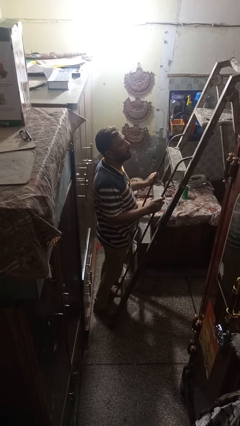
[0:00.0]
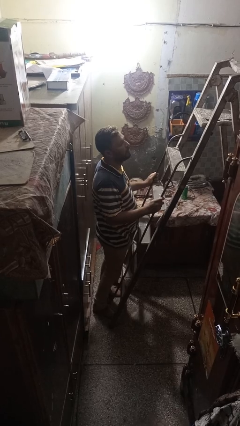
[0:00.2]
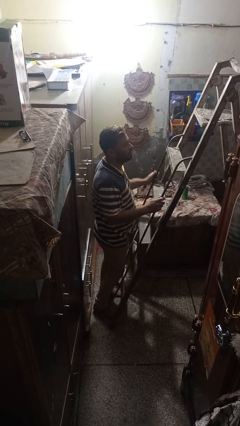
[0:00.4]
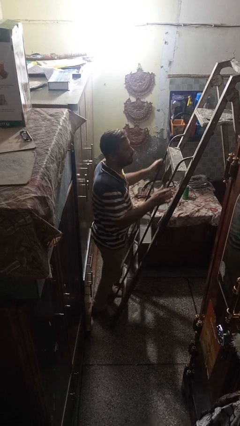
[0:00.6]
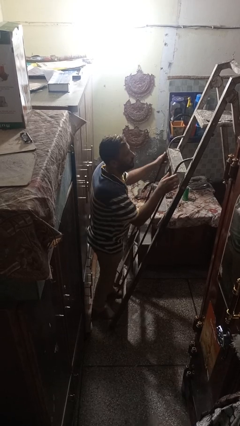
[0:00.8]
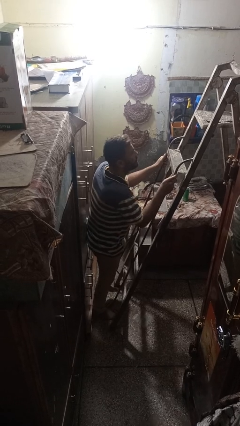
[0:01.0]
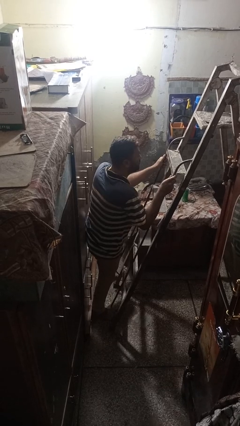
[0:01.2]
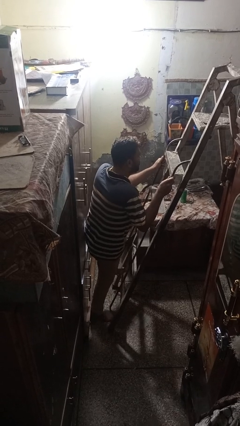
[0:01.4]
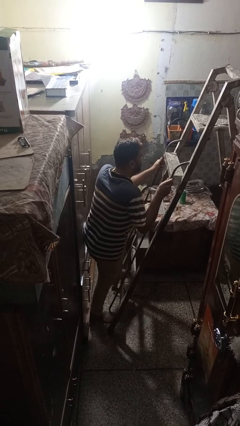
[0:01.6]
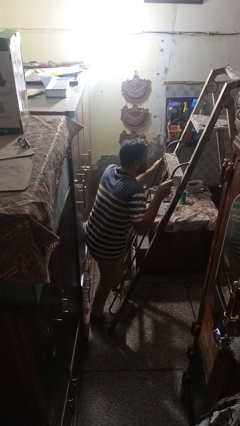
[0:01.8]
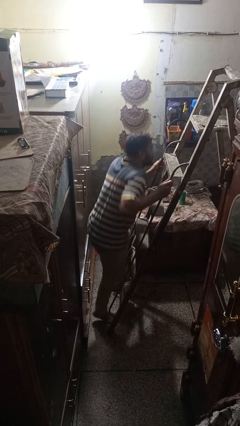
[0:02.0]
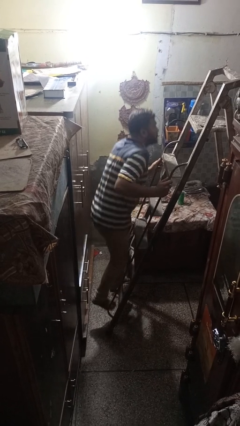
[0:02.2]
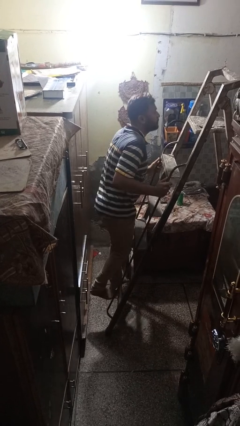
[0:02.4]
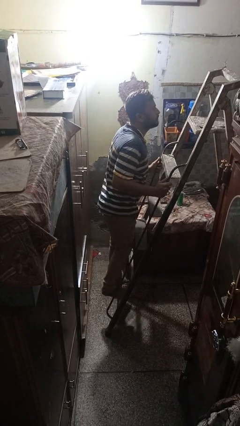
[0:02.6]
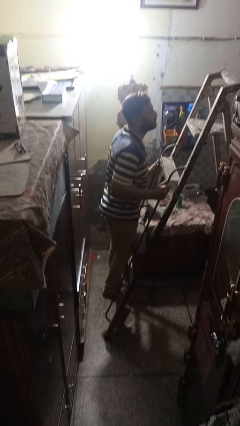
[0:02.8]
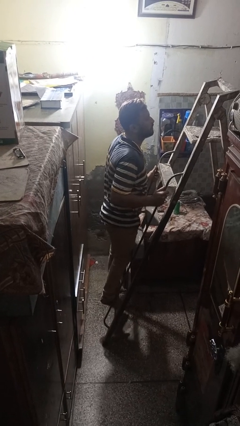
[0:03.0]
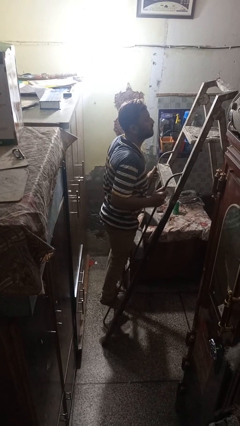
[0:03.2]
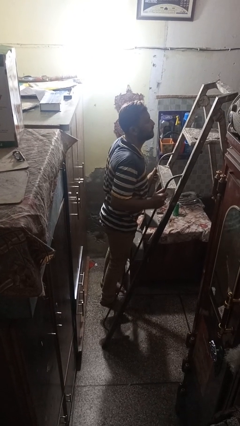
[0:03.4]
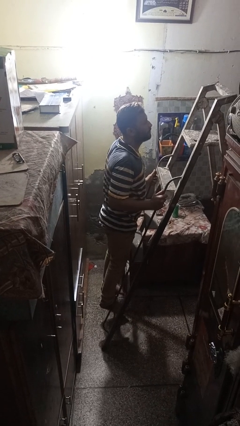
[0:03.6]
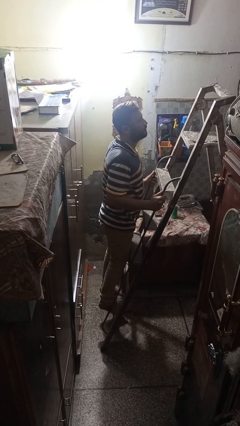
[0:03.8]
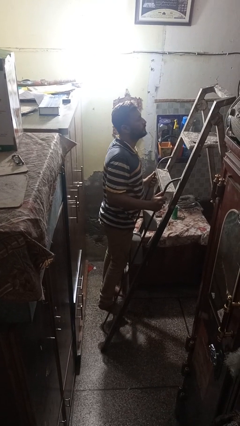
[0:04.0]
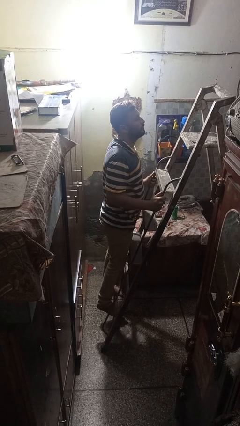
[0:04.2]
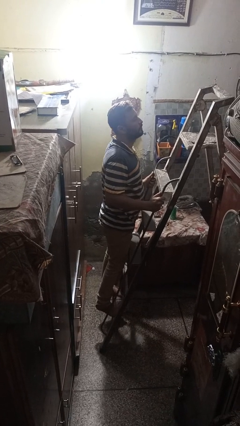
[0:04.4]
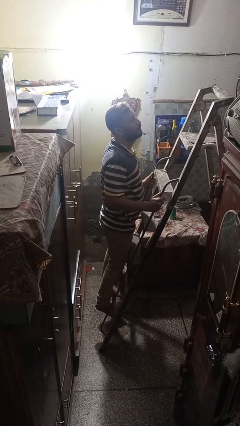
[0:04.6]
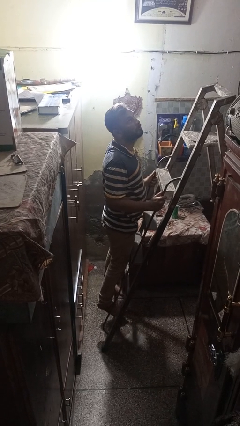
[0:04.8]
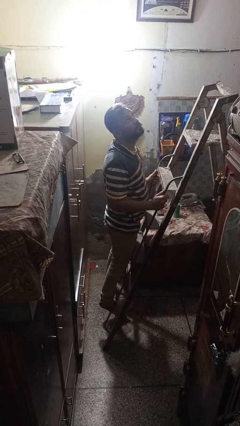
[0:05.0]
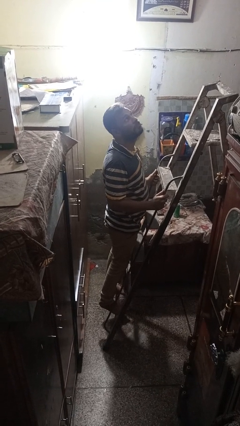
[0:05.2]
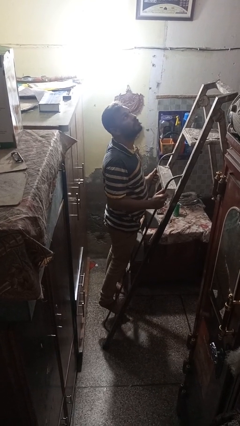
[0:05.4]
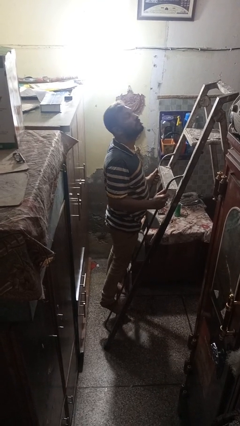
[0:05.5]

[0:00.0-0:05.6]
person climbs up ladder

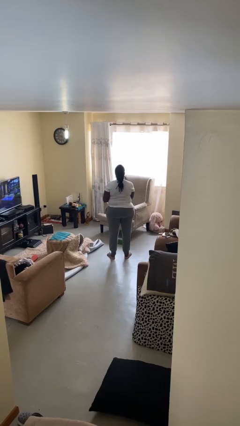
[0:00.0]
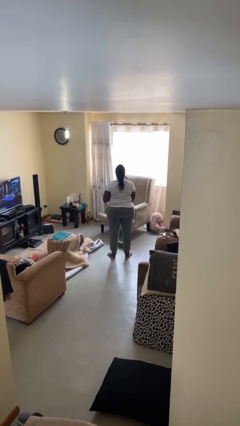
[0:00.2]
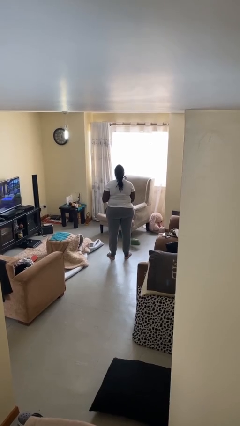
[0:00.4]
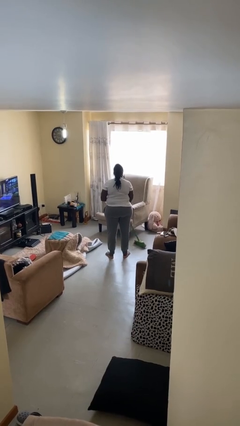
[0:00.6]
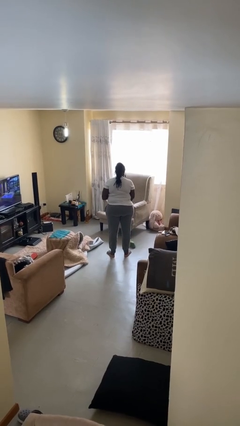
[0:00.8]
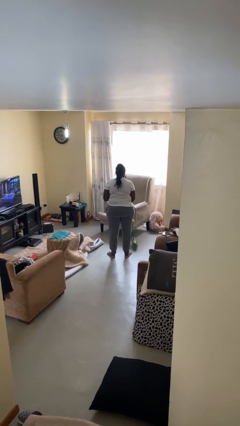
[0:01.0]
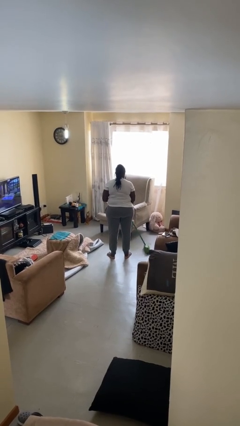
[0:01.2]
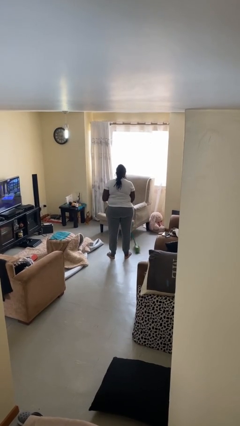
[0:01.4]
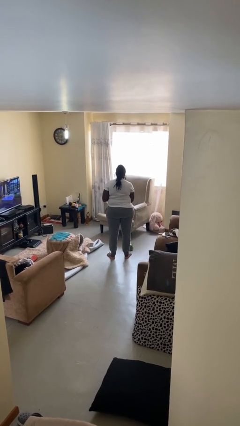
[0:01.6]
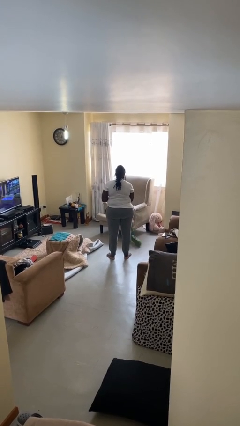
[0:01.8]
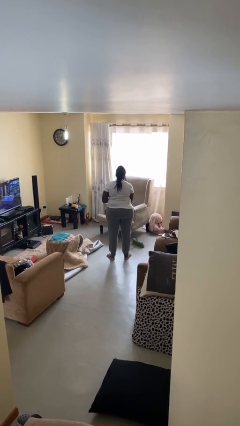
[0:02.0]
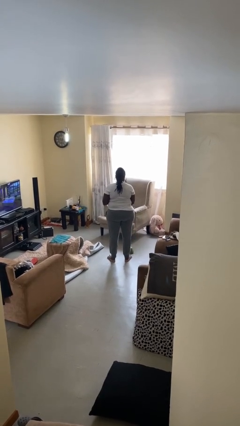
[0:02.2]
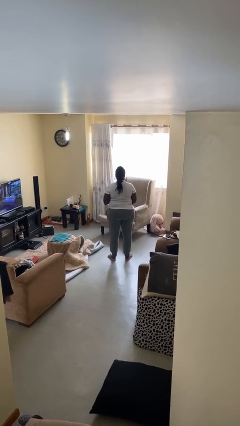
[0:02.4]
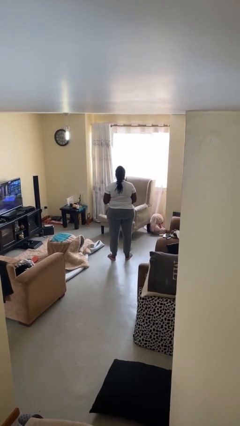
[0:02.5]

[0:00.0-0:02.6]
person sweeps floor

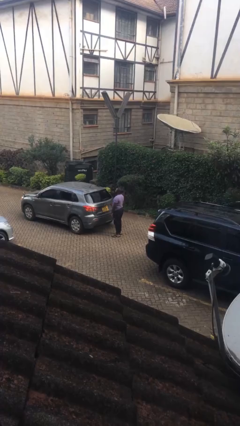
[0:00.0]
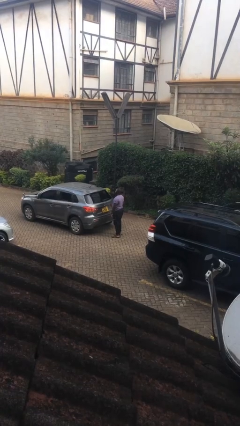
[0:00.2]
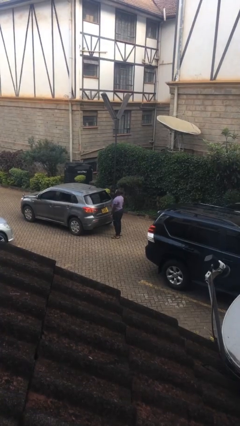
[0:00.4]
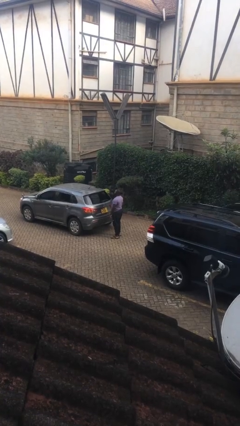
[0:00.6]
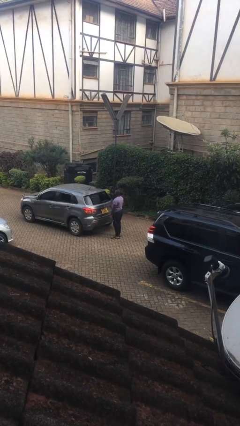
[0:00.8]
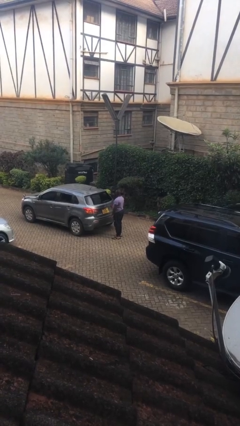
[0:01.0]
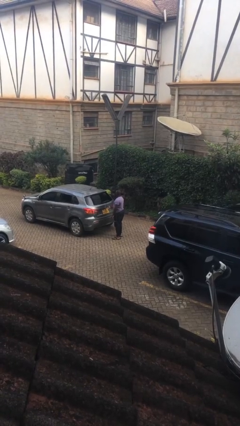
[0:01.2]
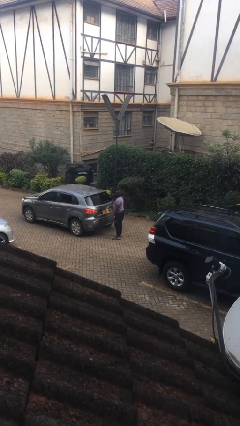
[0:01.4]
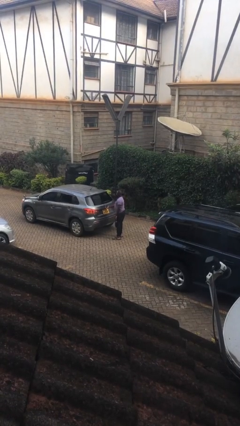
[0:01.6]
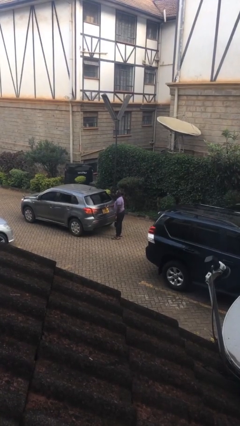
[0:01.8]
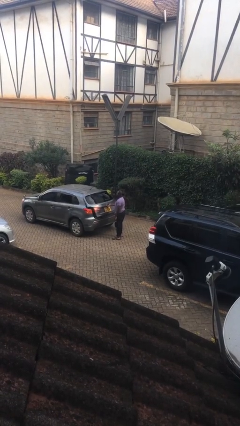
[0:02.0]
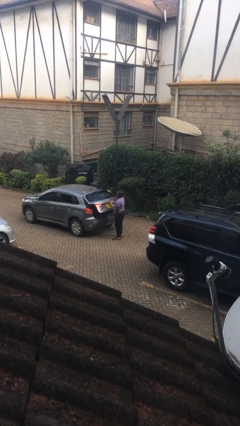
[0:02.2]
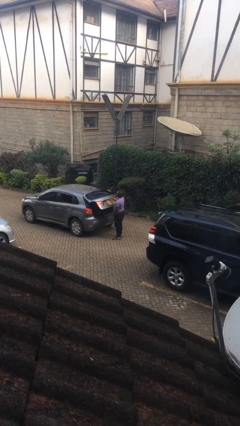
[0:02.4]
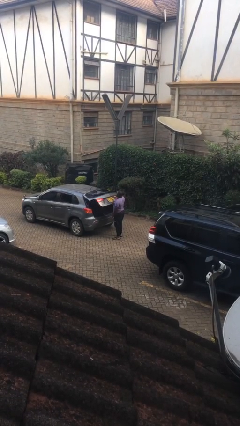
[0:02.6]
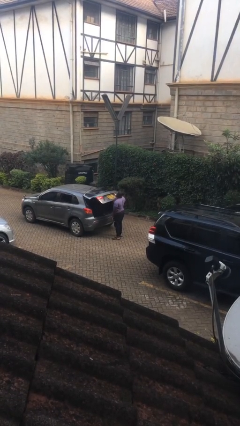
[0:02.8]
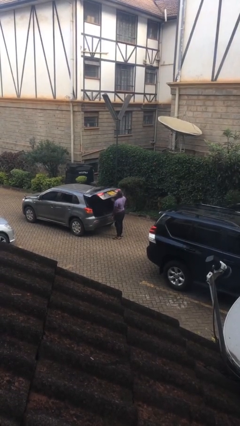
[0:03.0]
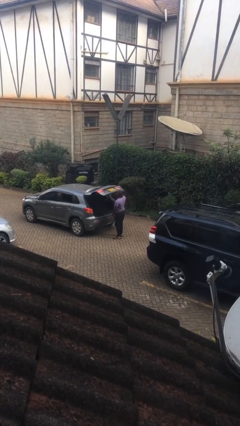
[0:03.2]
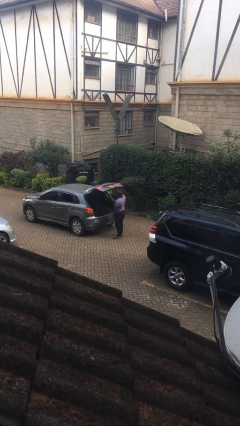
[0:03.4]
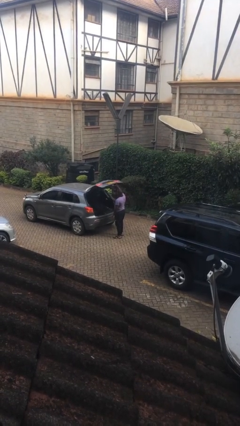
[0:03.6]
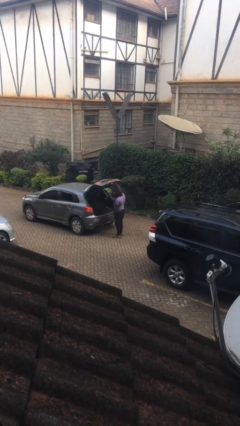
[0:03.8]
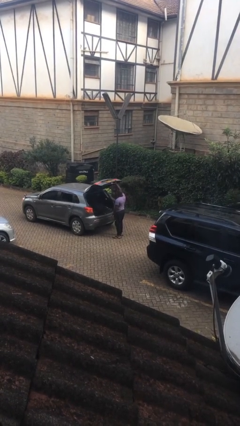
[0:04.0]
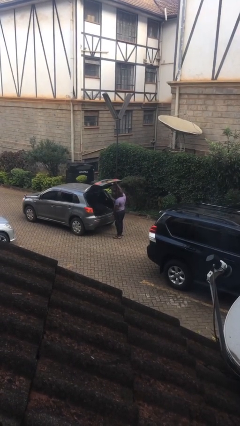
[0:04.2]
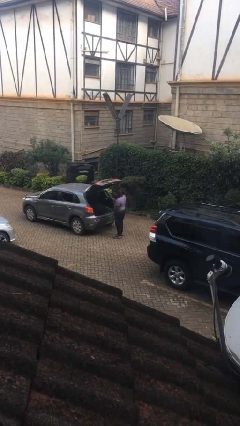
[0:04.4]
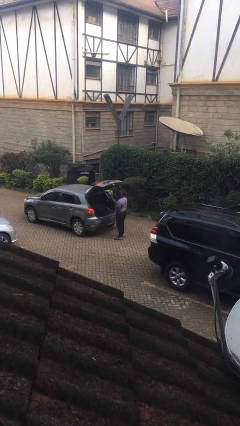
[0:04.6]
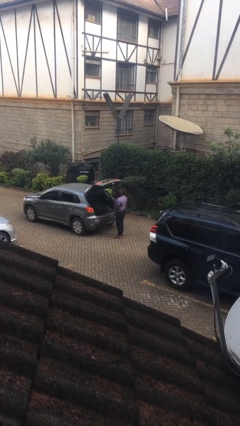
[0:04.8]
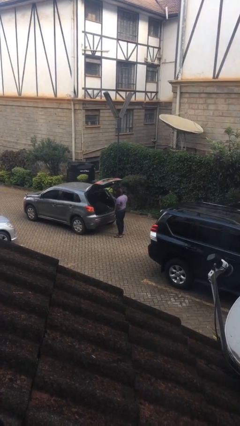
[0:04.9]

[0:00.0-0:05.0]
person opens car trunk

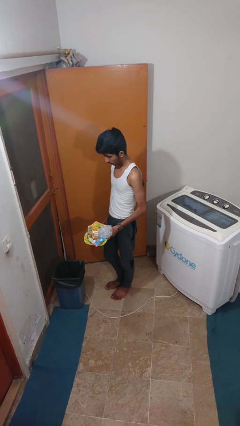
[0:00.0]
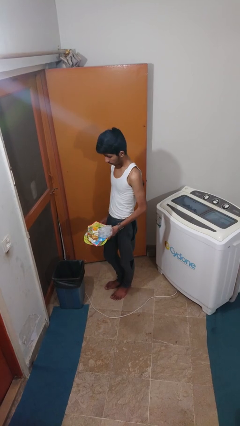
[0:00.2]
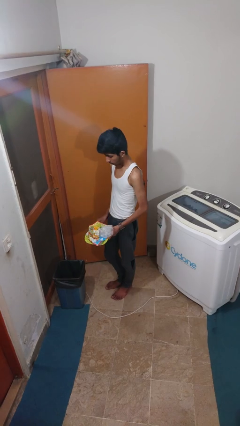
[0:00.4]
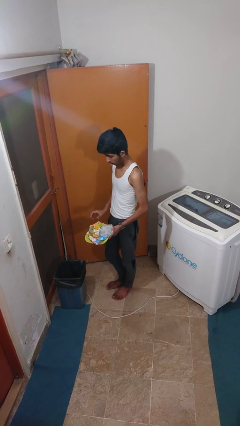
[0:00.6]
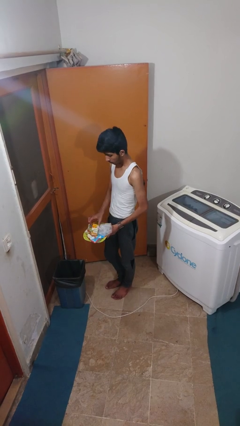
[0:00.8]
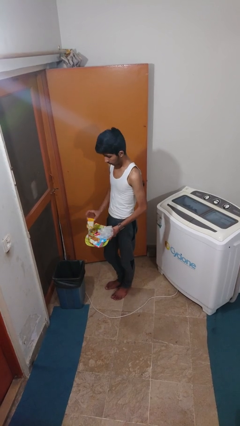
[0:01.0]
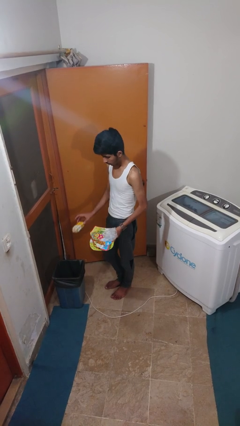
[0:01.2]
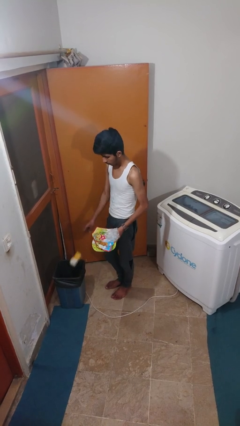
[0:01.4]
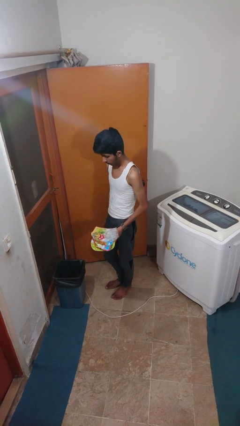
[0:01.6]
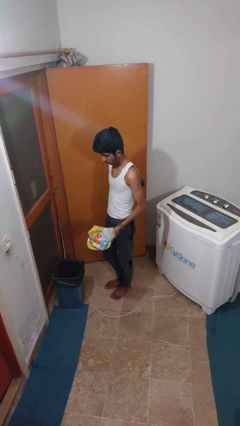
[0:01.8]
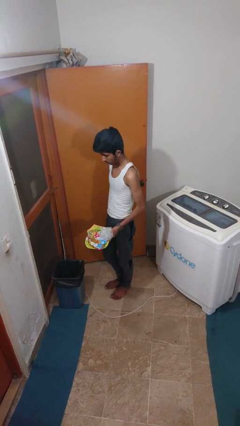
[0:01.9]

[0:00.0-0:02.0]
person discards trash

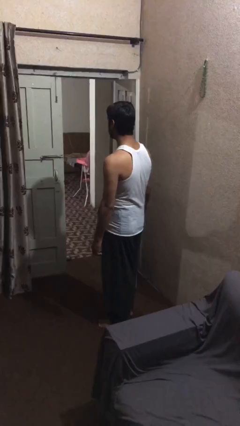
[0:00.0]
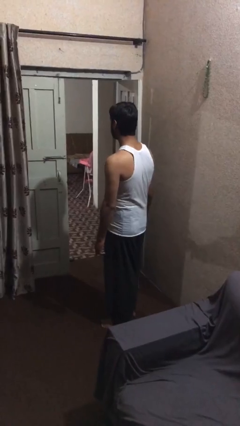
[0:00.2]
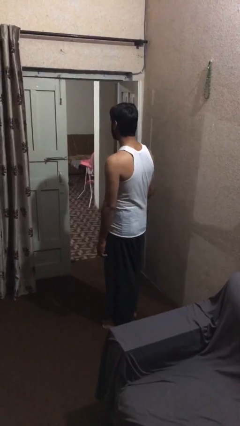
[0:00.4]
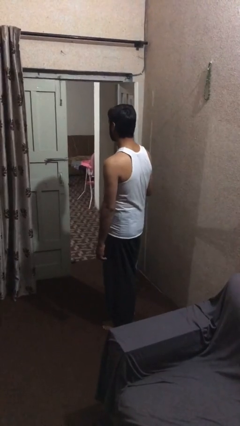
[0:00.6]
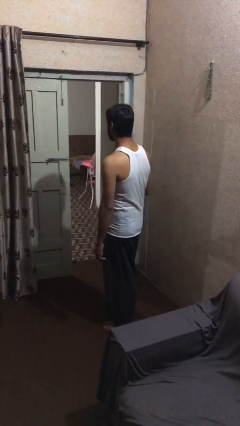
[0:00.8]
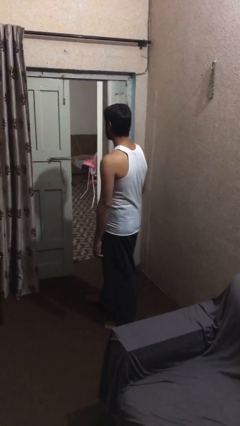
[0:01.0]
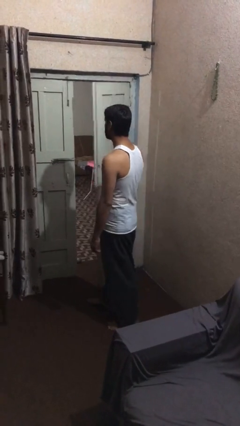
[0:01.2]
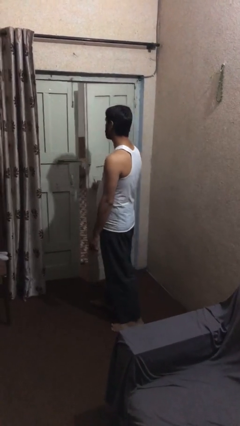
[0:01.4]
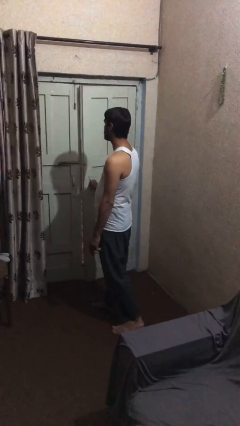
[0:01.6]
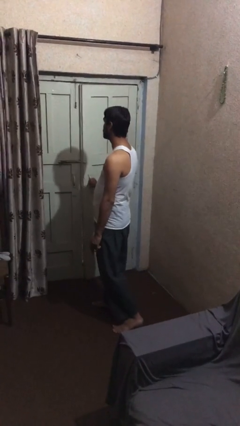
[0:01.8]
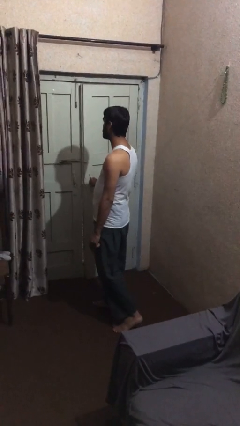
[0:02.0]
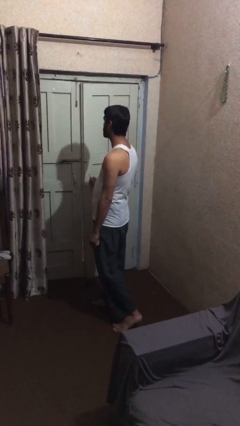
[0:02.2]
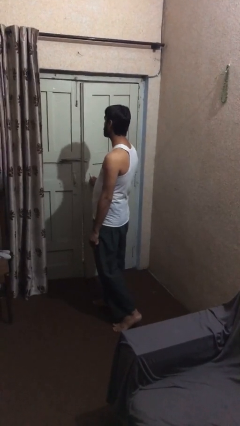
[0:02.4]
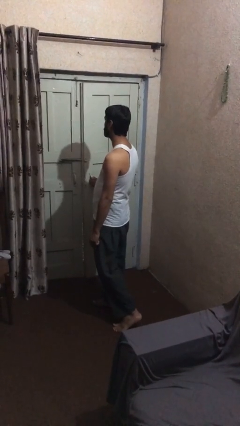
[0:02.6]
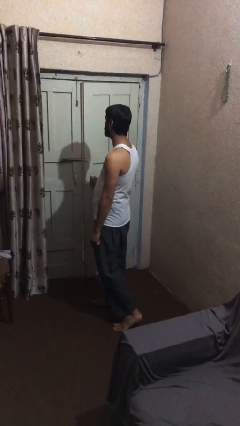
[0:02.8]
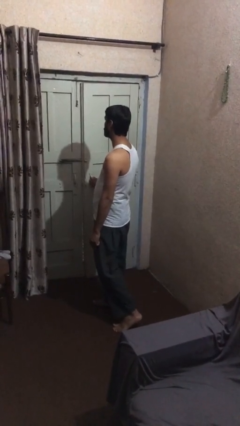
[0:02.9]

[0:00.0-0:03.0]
person closes facility door
